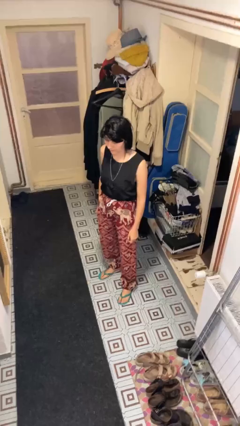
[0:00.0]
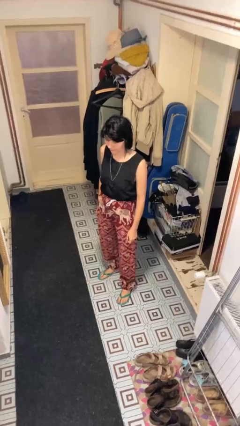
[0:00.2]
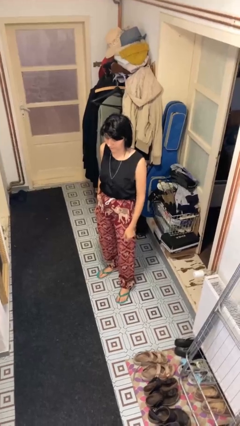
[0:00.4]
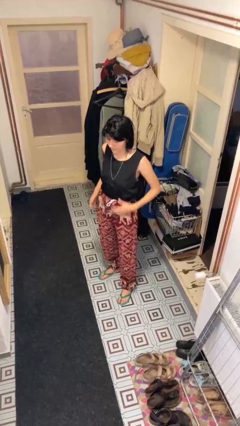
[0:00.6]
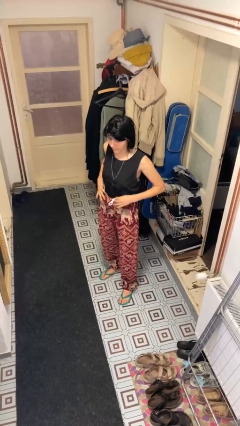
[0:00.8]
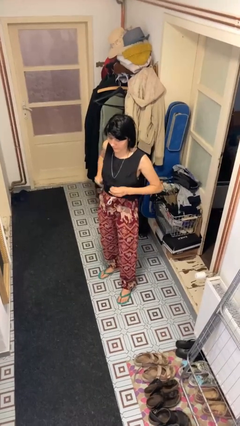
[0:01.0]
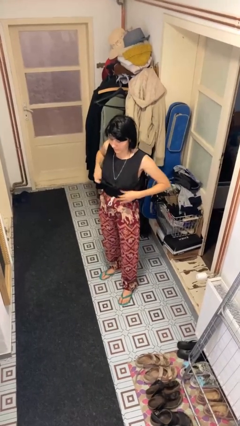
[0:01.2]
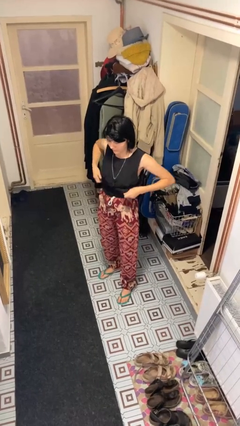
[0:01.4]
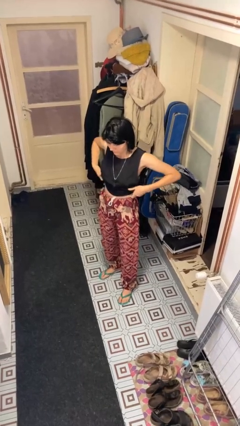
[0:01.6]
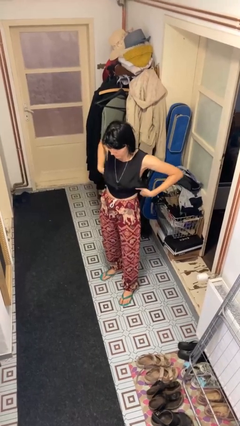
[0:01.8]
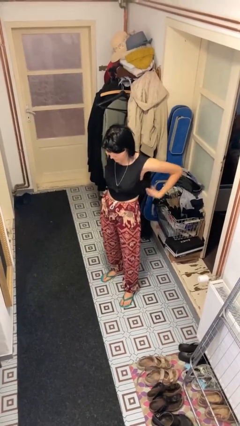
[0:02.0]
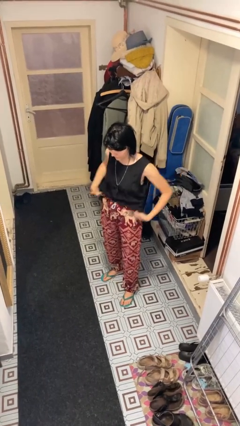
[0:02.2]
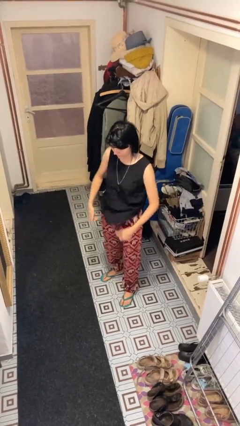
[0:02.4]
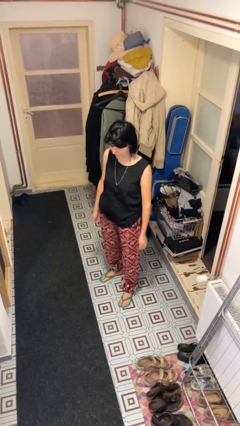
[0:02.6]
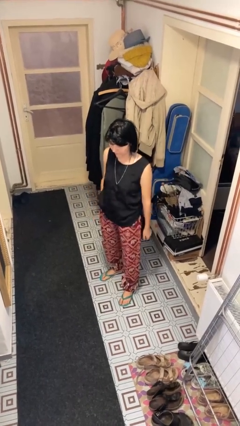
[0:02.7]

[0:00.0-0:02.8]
person untucks shirt

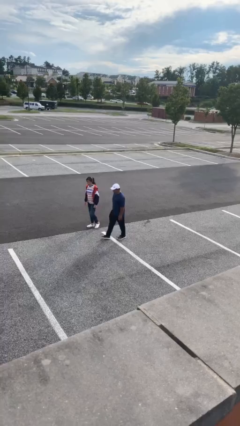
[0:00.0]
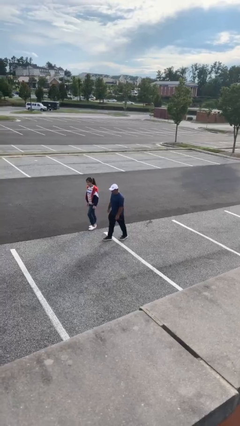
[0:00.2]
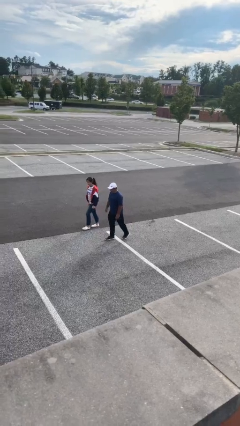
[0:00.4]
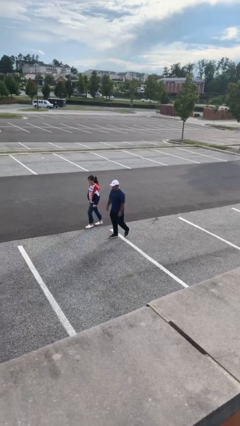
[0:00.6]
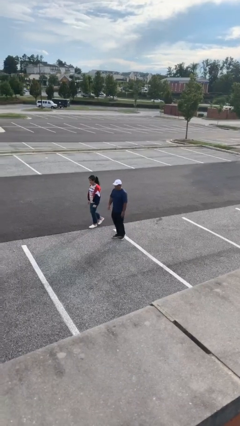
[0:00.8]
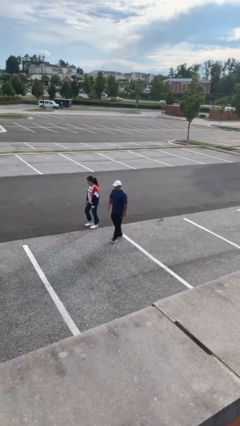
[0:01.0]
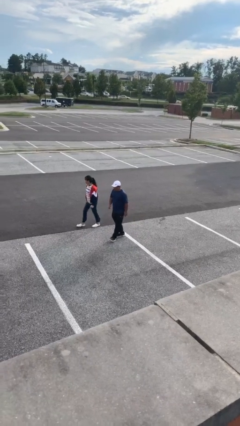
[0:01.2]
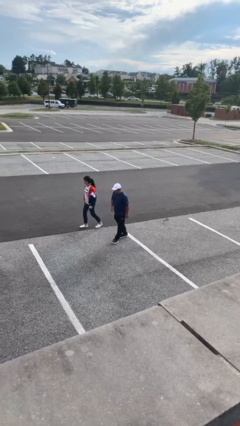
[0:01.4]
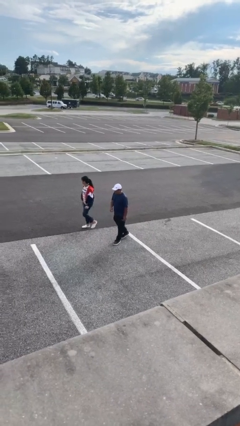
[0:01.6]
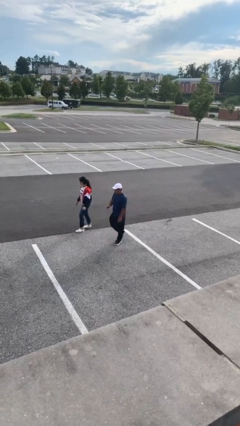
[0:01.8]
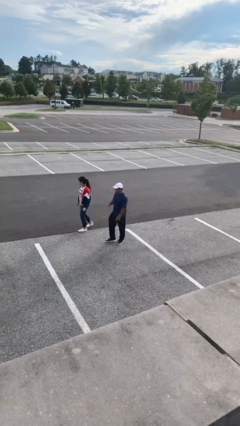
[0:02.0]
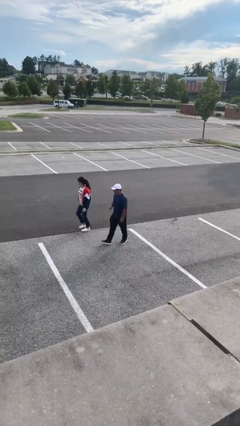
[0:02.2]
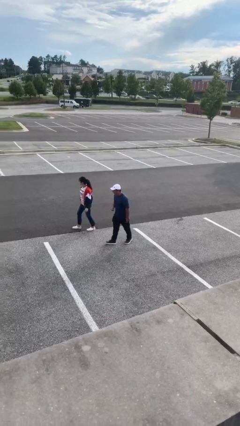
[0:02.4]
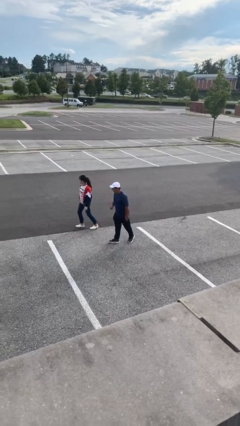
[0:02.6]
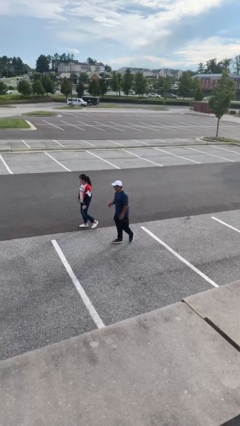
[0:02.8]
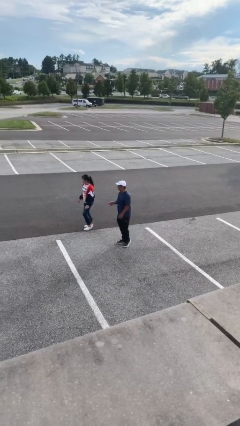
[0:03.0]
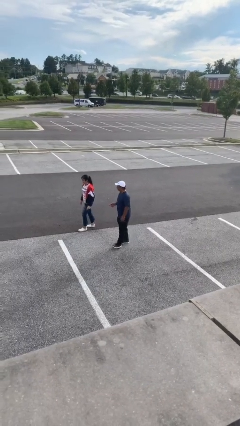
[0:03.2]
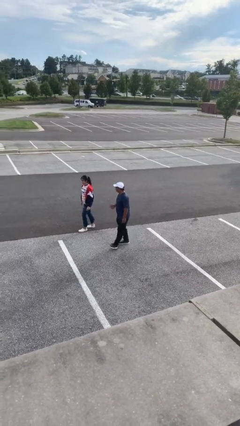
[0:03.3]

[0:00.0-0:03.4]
person talks to person

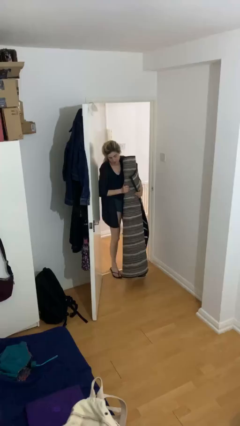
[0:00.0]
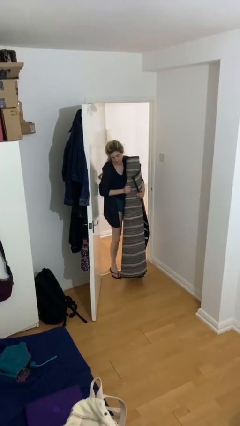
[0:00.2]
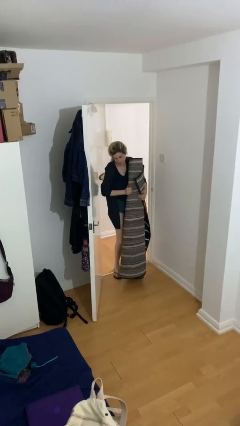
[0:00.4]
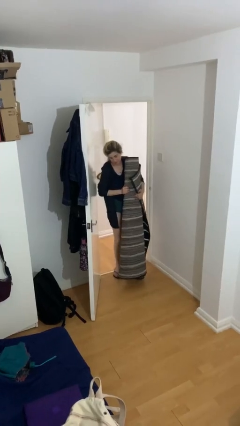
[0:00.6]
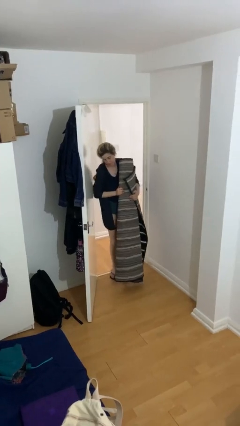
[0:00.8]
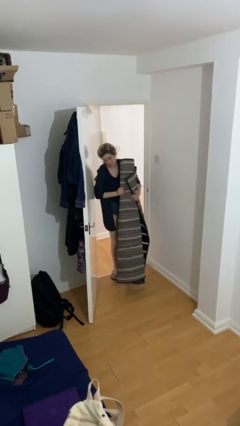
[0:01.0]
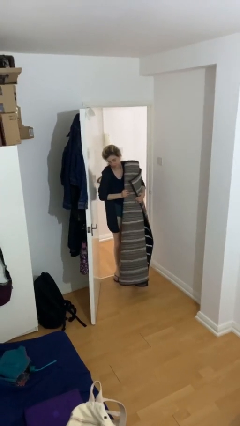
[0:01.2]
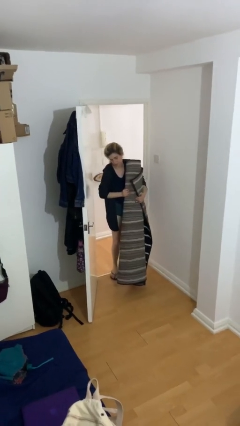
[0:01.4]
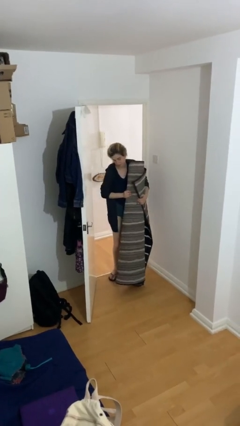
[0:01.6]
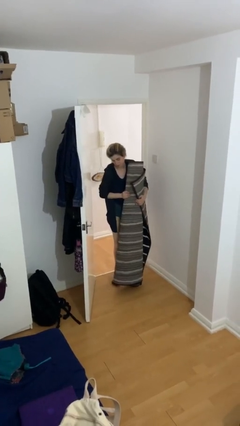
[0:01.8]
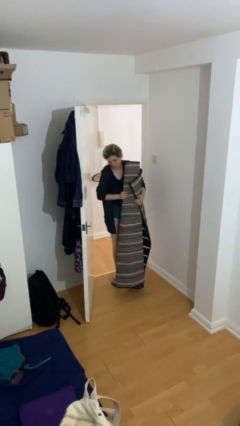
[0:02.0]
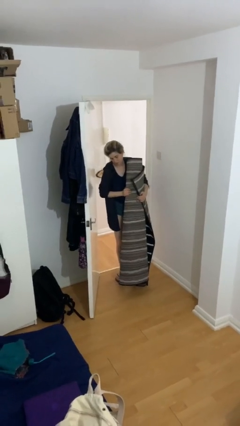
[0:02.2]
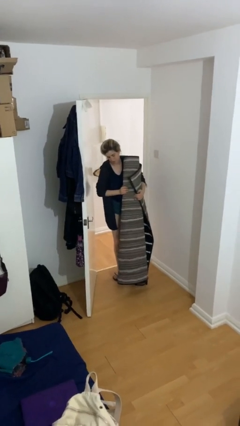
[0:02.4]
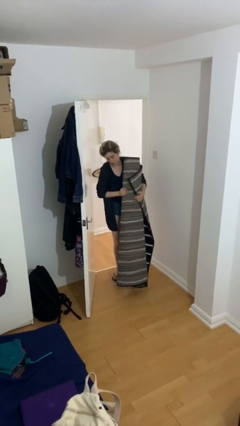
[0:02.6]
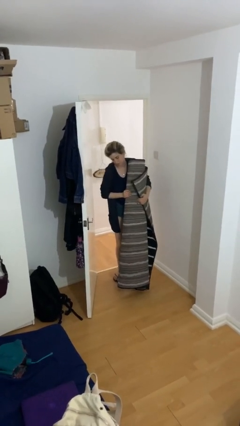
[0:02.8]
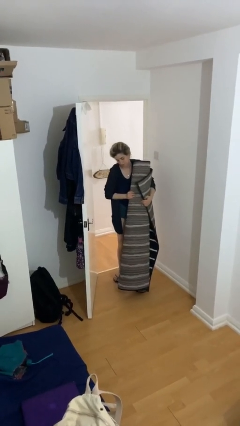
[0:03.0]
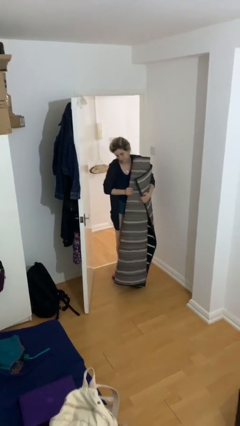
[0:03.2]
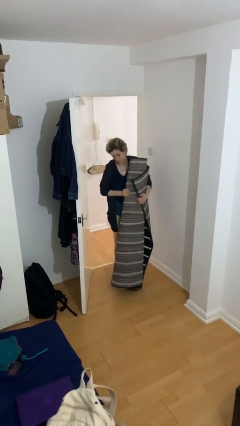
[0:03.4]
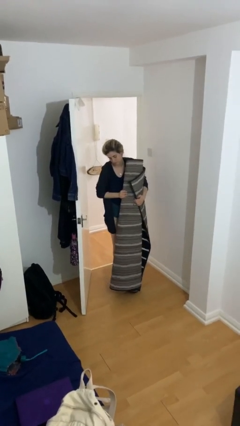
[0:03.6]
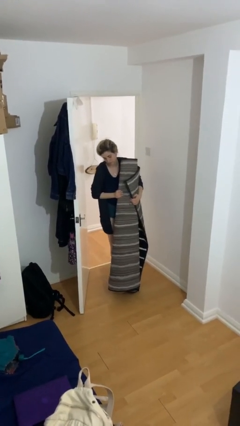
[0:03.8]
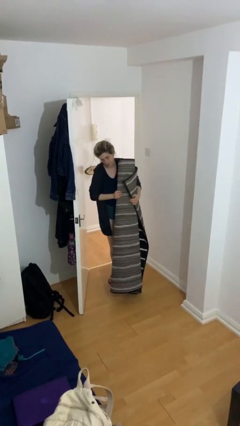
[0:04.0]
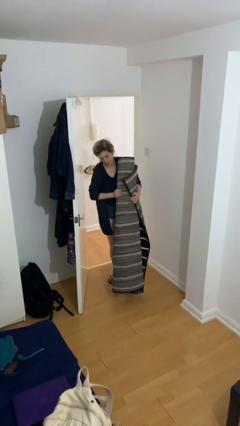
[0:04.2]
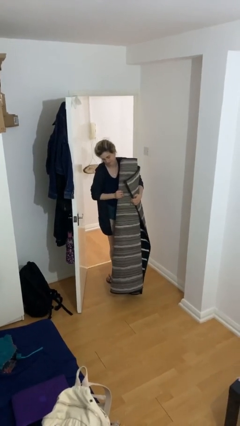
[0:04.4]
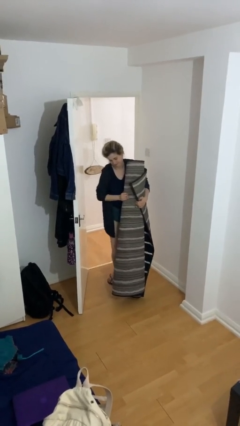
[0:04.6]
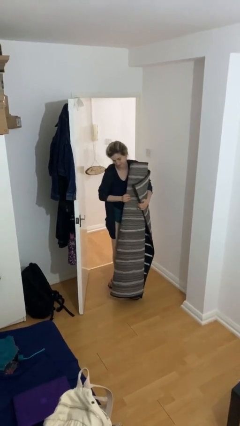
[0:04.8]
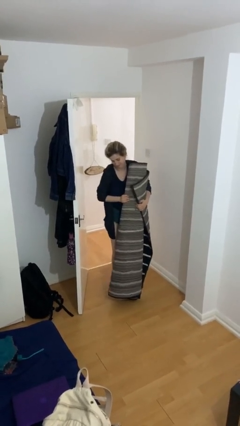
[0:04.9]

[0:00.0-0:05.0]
person carries heavy object

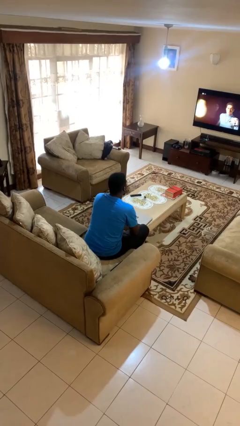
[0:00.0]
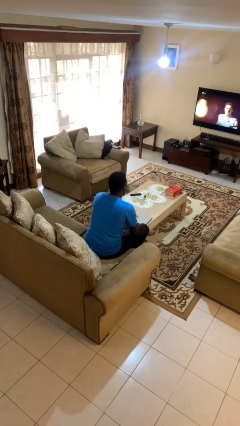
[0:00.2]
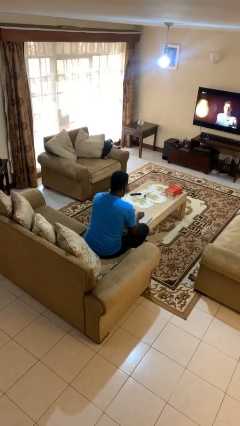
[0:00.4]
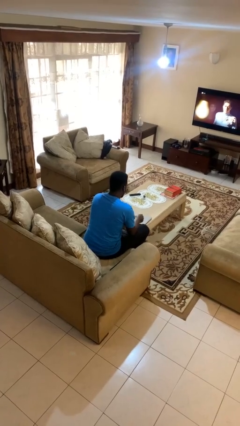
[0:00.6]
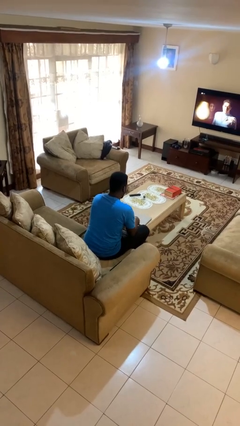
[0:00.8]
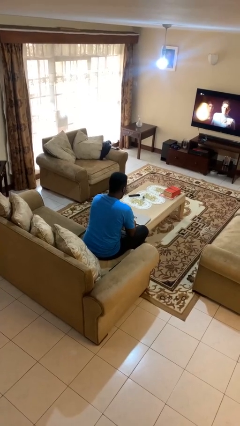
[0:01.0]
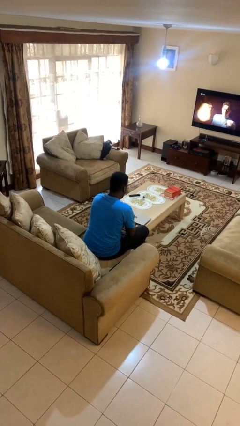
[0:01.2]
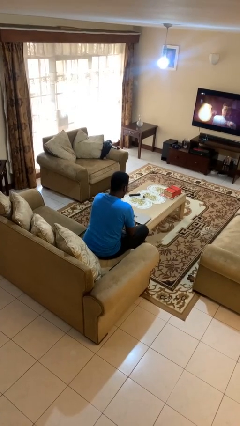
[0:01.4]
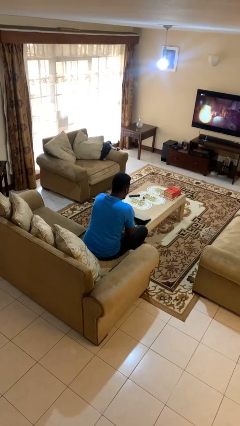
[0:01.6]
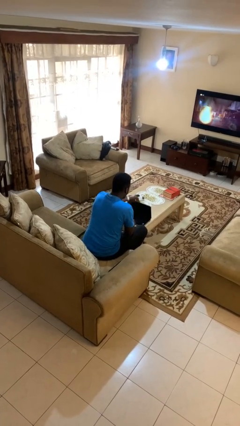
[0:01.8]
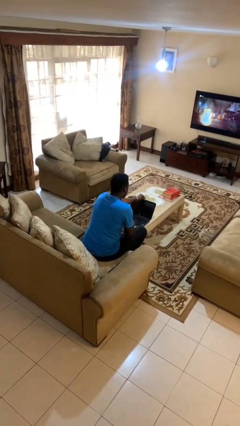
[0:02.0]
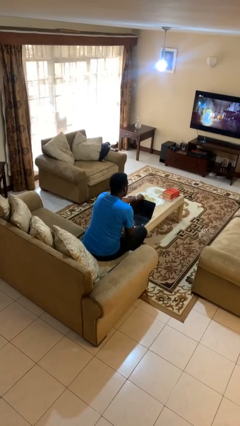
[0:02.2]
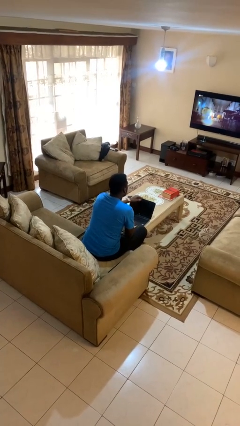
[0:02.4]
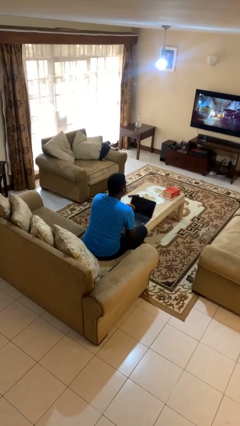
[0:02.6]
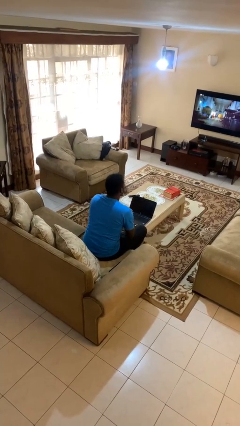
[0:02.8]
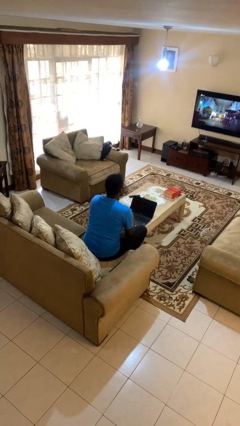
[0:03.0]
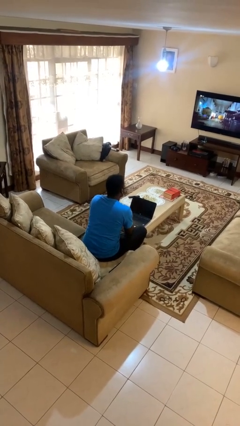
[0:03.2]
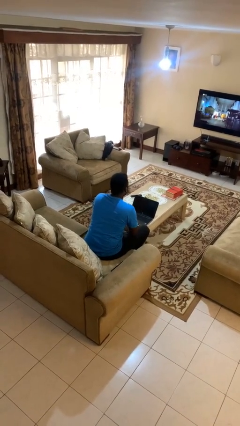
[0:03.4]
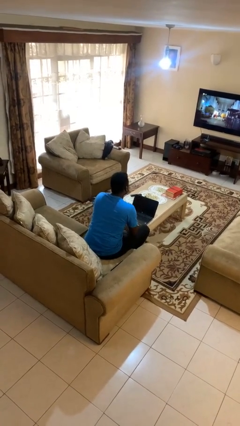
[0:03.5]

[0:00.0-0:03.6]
person opens laptop

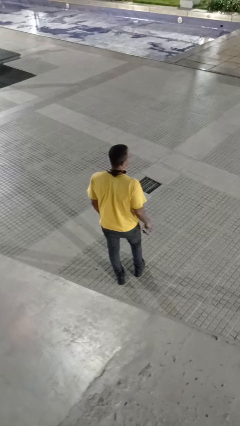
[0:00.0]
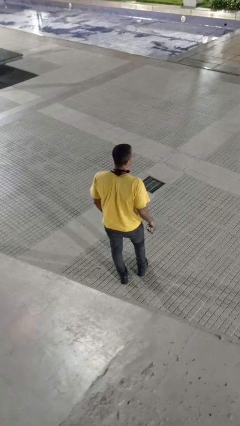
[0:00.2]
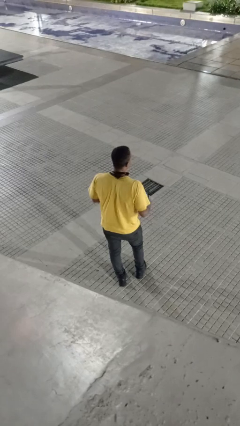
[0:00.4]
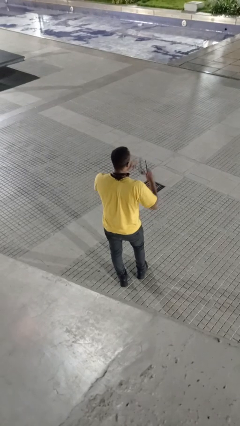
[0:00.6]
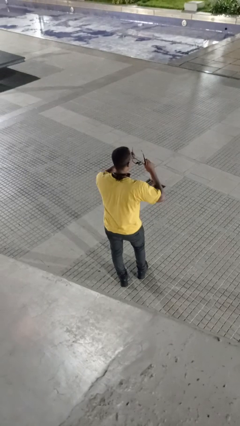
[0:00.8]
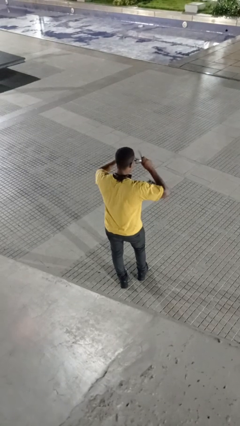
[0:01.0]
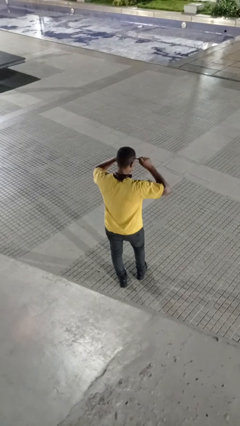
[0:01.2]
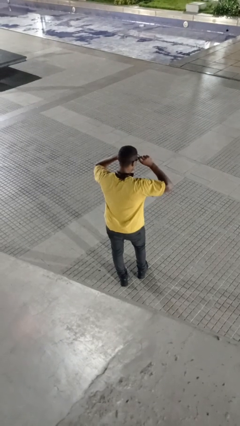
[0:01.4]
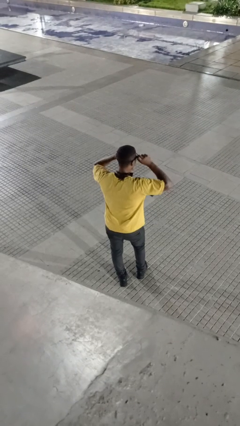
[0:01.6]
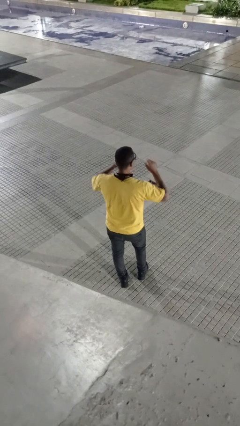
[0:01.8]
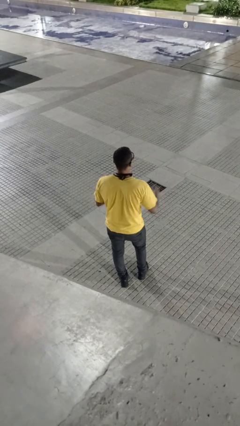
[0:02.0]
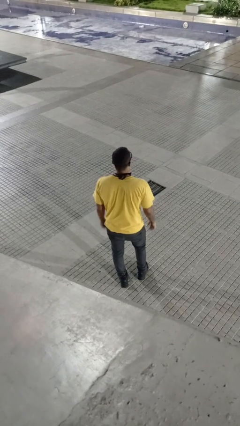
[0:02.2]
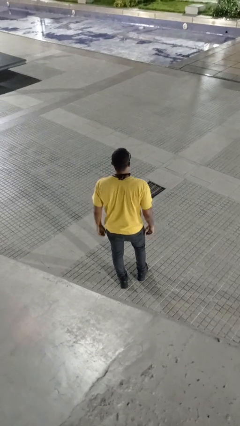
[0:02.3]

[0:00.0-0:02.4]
person puts on glasses
